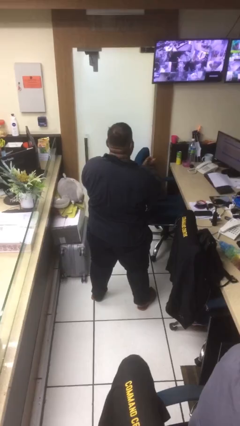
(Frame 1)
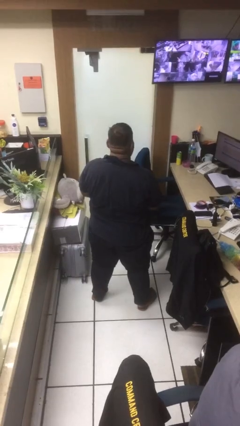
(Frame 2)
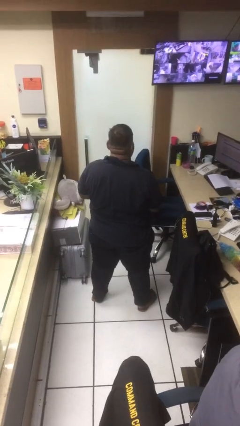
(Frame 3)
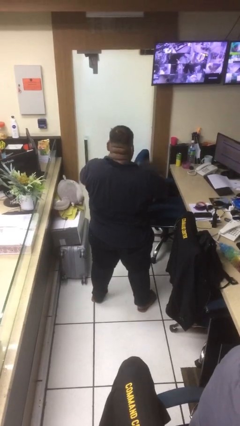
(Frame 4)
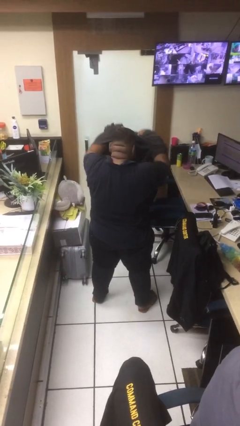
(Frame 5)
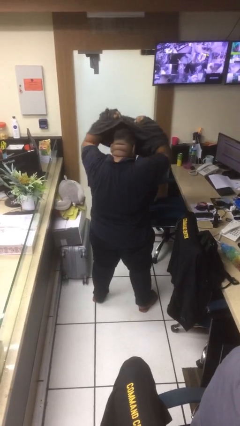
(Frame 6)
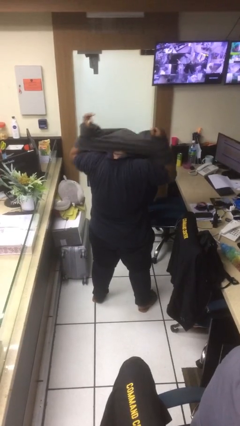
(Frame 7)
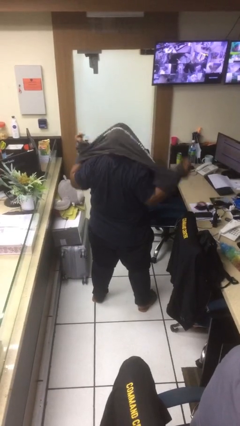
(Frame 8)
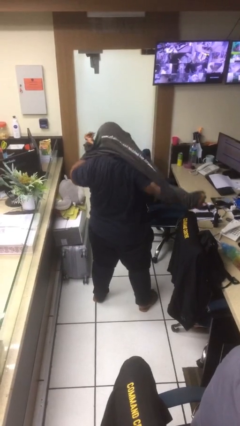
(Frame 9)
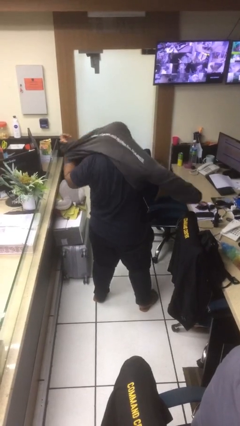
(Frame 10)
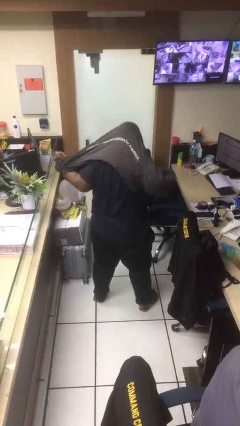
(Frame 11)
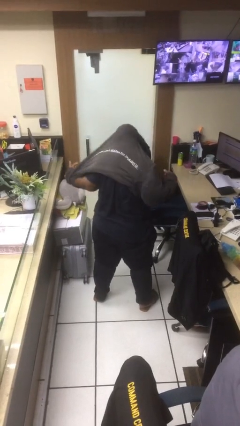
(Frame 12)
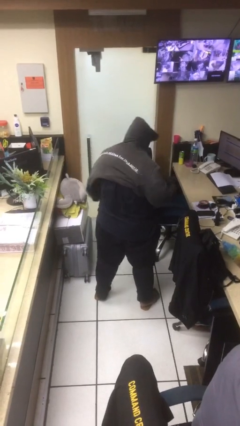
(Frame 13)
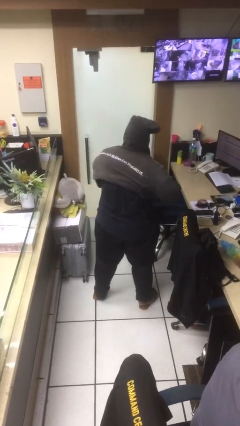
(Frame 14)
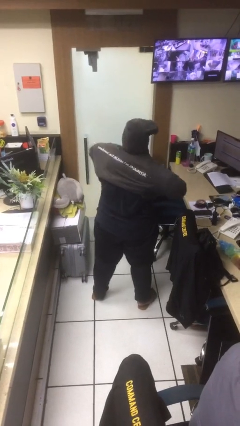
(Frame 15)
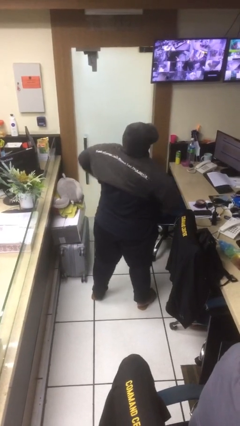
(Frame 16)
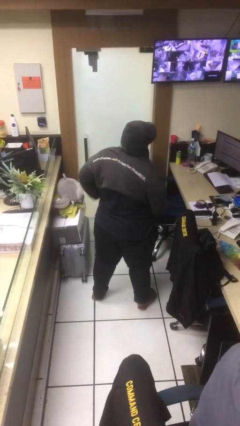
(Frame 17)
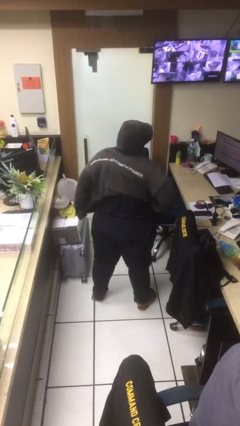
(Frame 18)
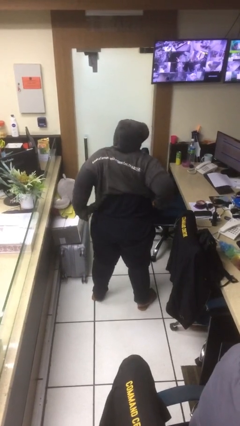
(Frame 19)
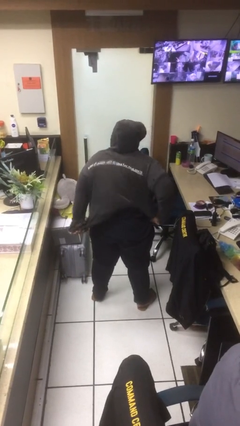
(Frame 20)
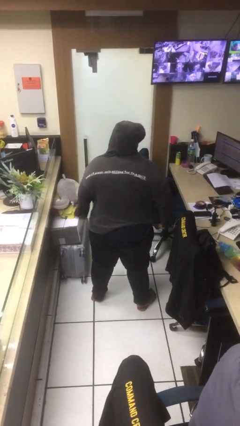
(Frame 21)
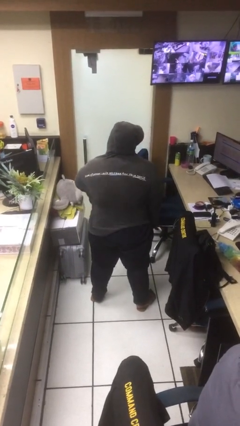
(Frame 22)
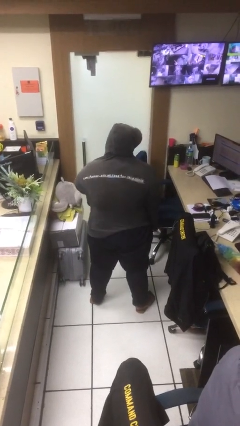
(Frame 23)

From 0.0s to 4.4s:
person puts on hoodie

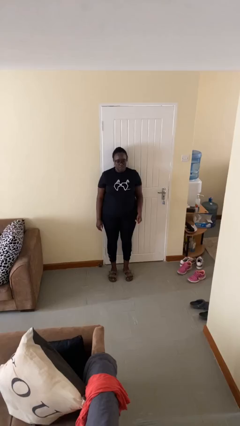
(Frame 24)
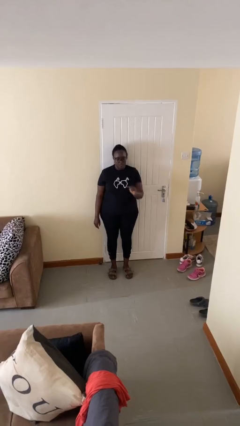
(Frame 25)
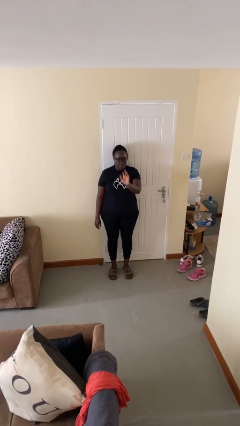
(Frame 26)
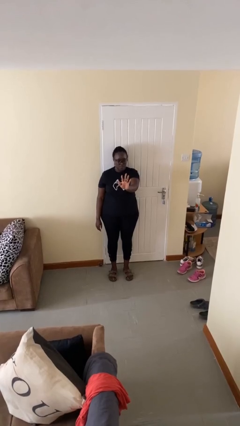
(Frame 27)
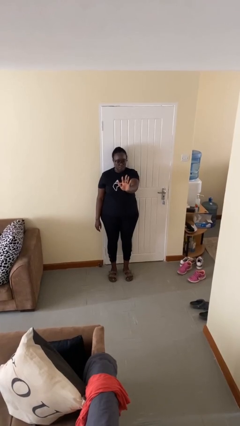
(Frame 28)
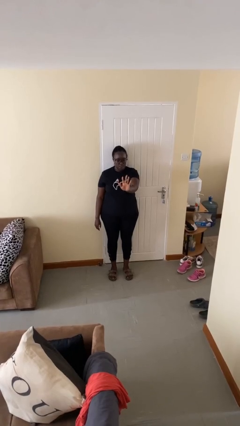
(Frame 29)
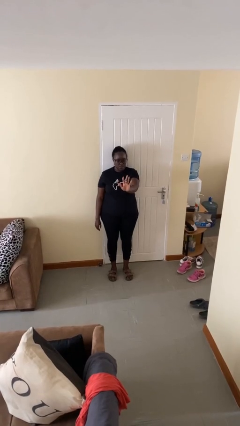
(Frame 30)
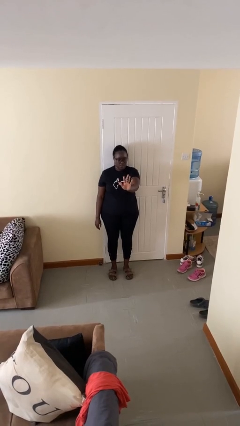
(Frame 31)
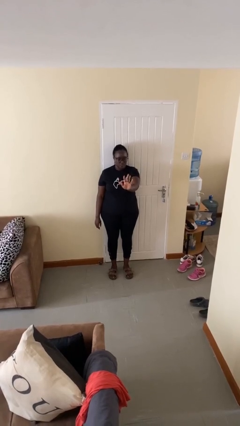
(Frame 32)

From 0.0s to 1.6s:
person gestures number five

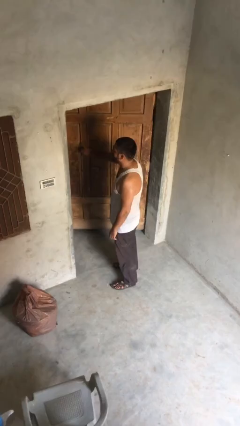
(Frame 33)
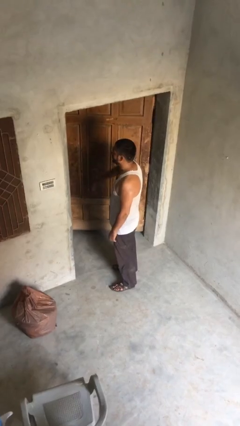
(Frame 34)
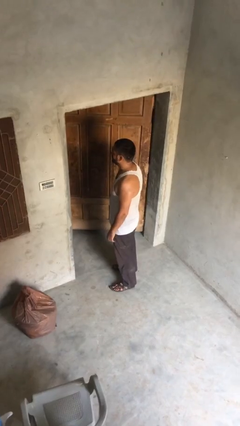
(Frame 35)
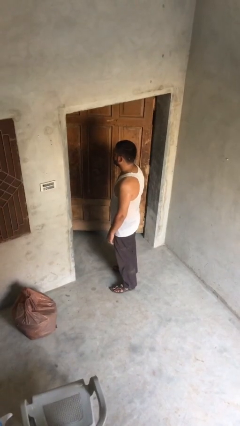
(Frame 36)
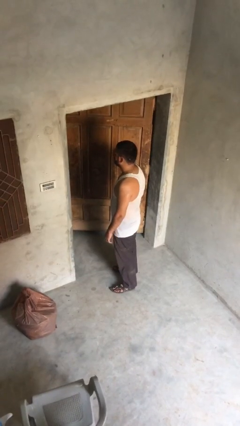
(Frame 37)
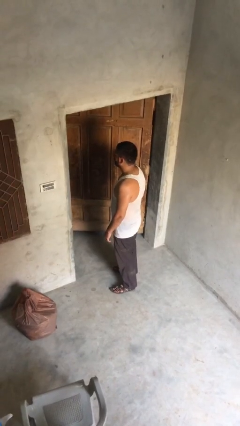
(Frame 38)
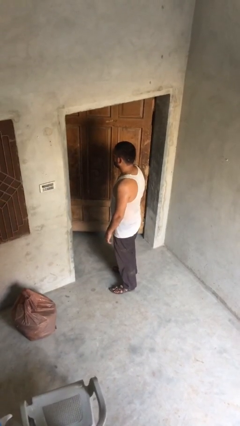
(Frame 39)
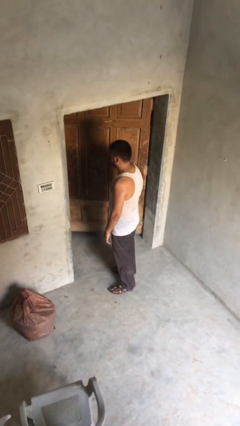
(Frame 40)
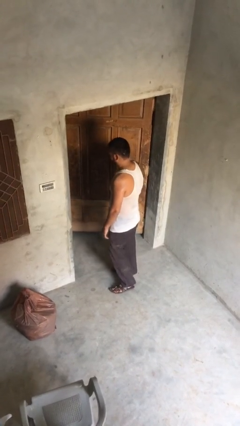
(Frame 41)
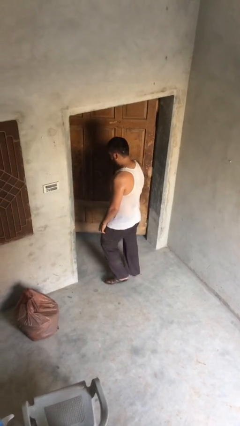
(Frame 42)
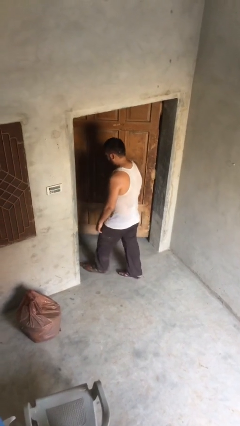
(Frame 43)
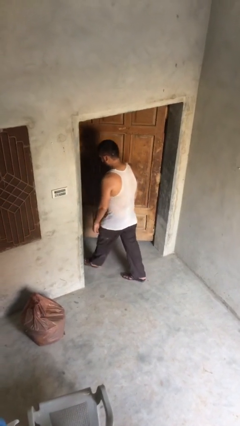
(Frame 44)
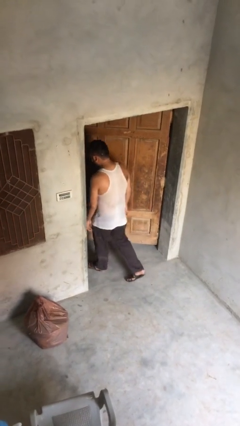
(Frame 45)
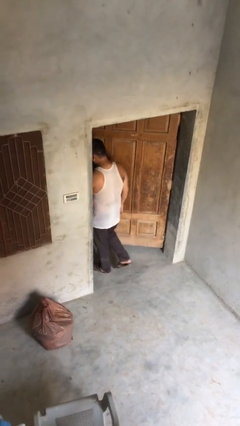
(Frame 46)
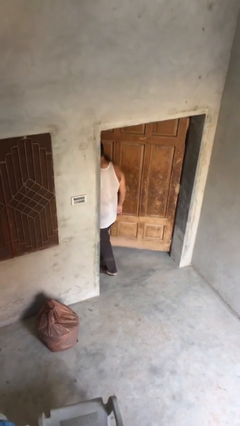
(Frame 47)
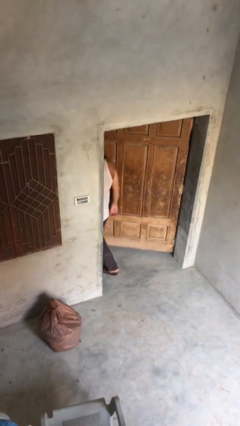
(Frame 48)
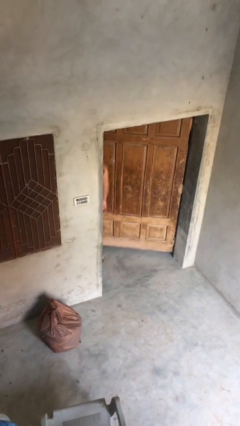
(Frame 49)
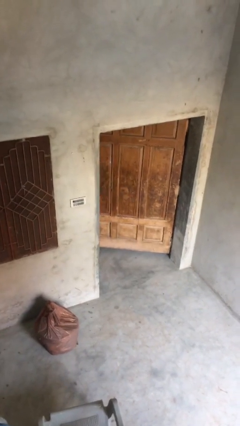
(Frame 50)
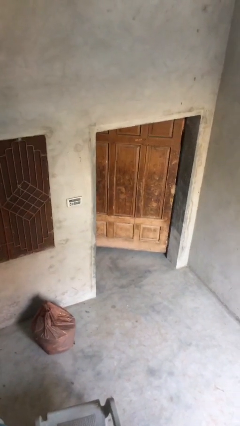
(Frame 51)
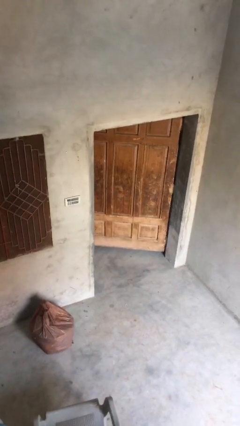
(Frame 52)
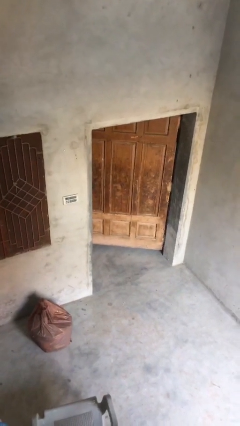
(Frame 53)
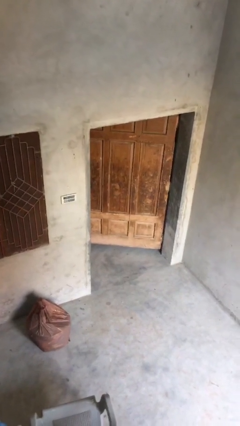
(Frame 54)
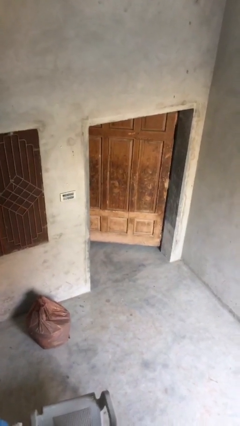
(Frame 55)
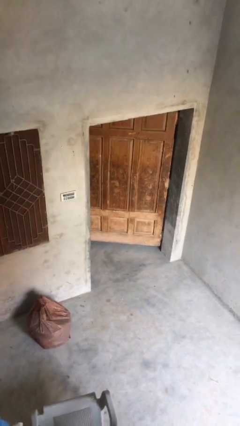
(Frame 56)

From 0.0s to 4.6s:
person exits scene through structure

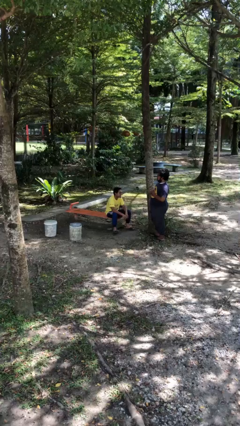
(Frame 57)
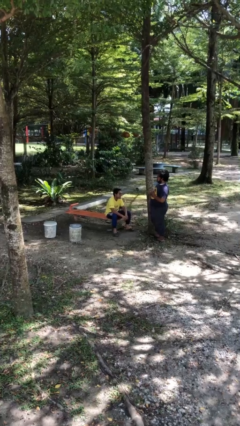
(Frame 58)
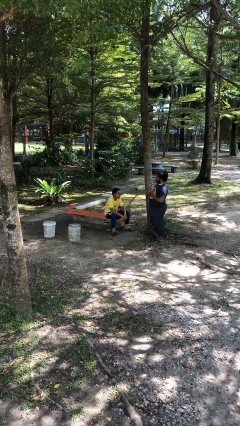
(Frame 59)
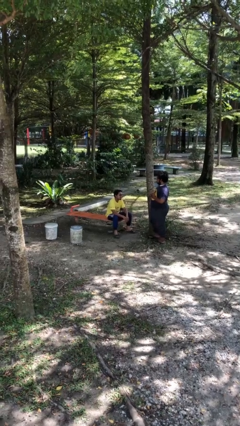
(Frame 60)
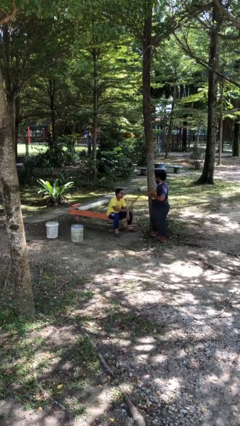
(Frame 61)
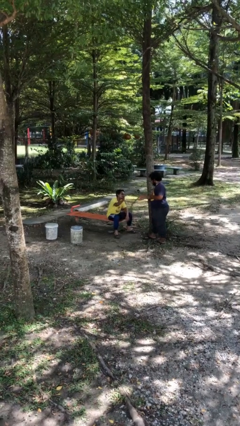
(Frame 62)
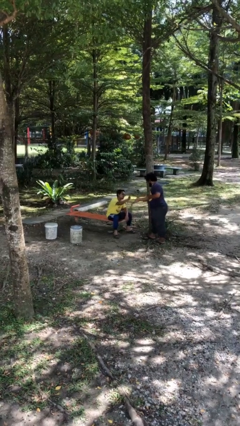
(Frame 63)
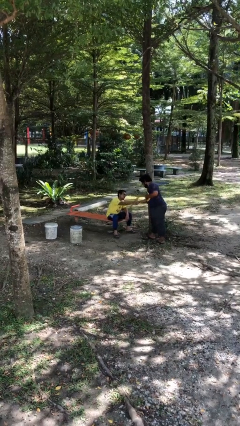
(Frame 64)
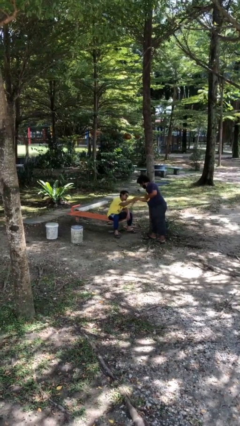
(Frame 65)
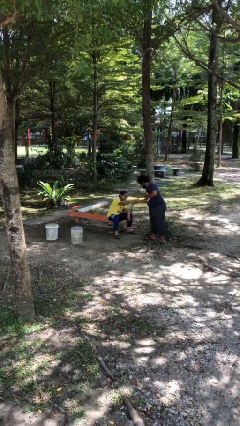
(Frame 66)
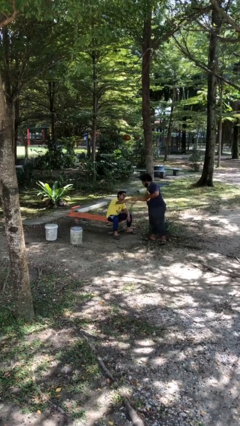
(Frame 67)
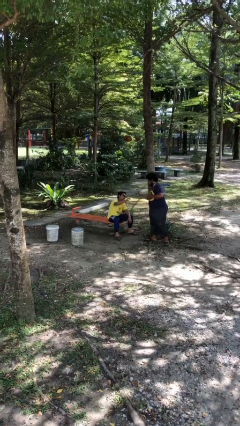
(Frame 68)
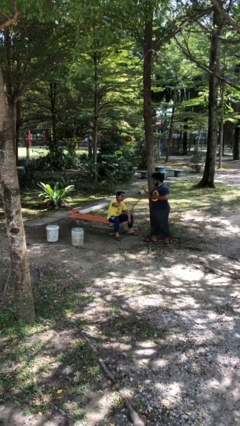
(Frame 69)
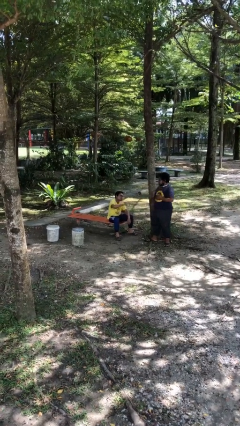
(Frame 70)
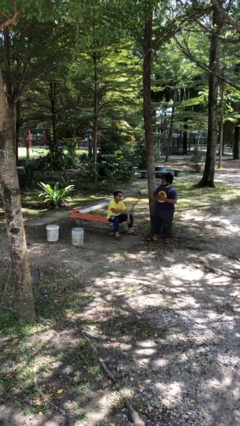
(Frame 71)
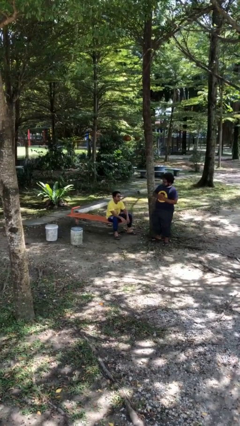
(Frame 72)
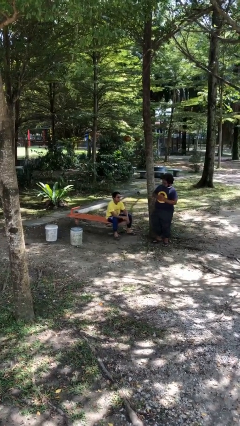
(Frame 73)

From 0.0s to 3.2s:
person shakes hand

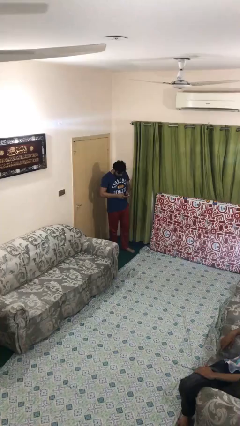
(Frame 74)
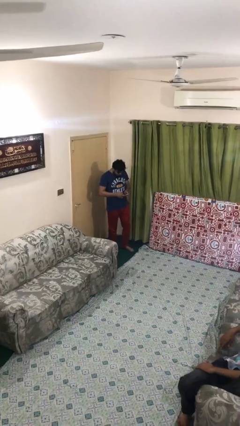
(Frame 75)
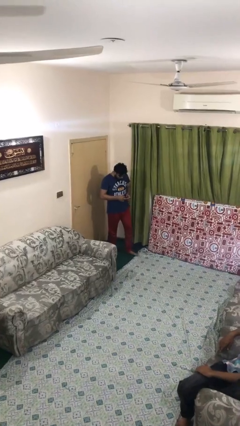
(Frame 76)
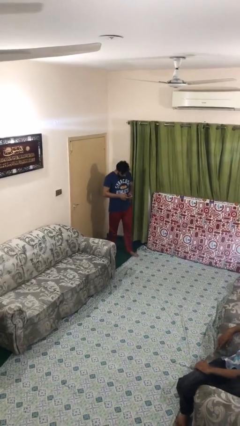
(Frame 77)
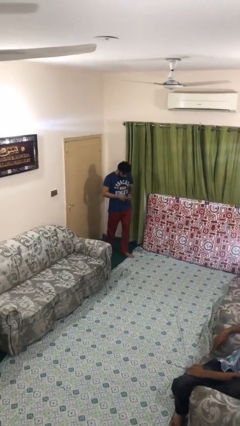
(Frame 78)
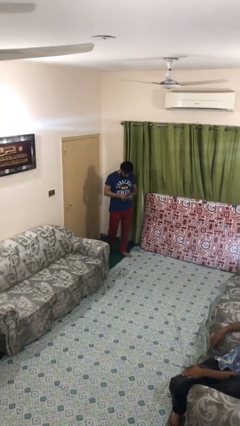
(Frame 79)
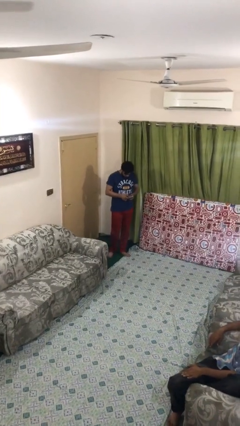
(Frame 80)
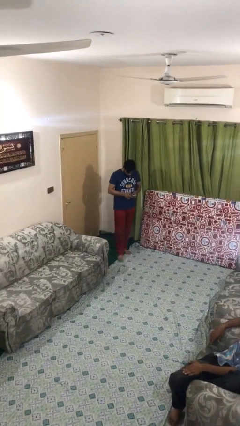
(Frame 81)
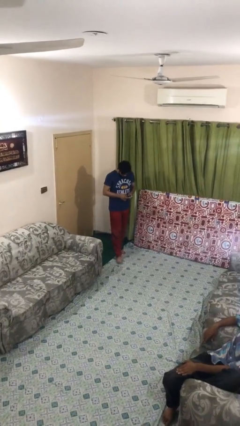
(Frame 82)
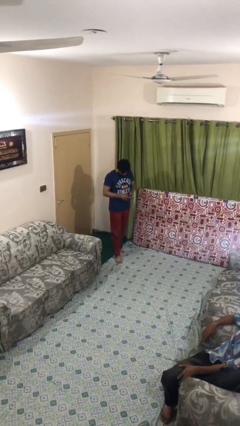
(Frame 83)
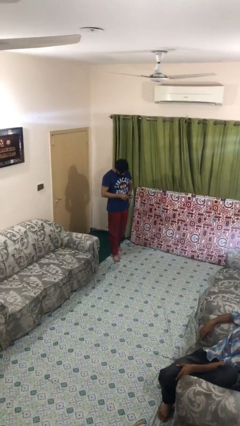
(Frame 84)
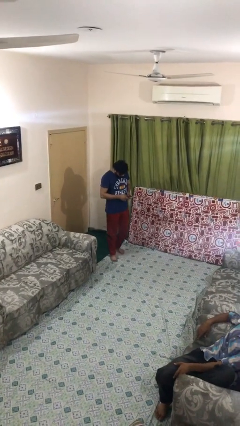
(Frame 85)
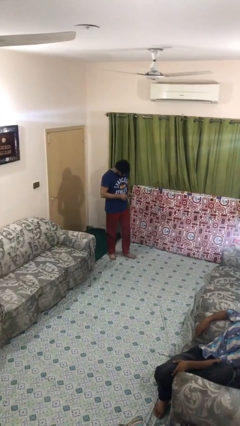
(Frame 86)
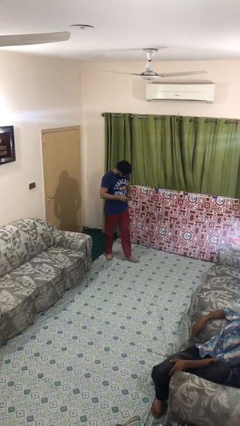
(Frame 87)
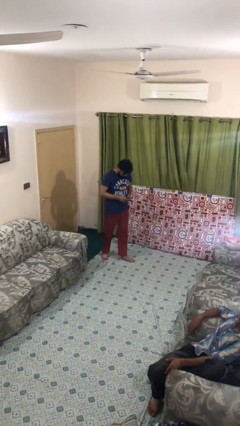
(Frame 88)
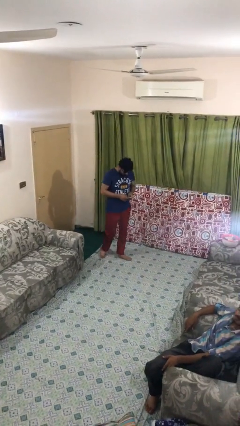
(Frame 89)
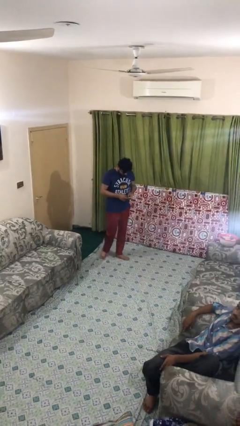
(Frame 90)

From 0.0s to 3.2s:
person texts on phone

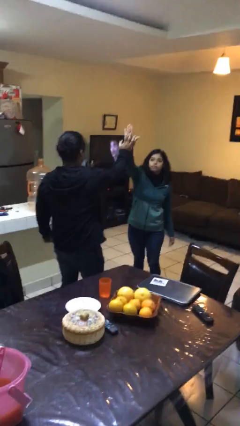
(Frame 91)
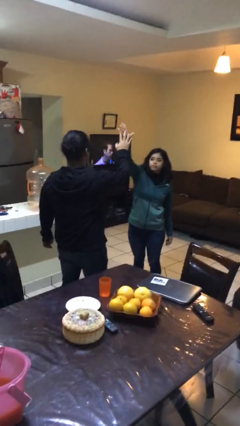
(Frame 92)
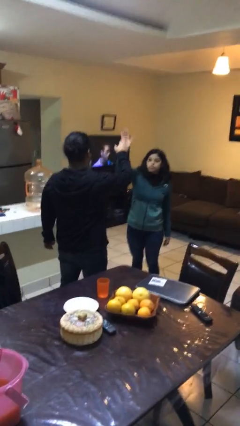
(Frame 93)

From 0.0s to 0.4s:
person highfives hand
